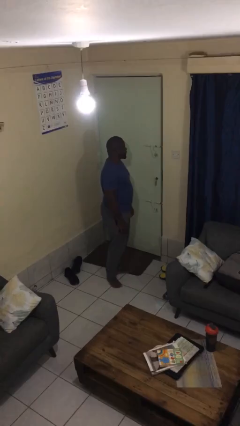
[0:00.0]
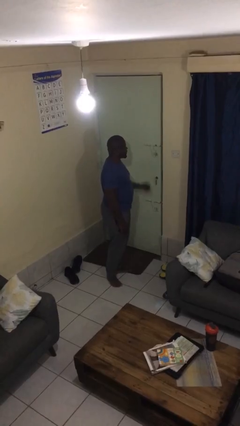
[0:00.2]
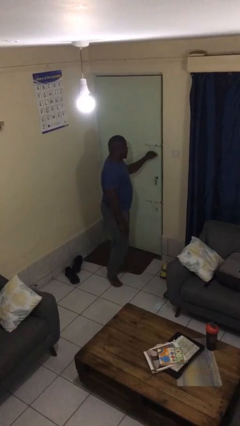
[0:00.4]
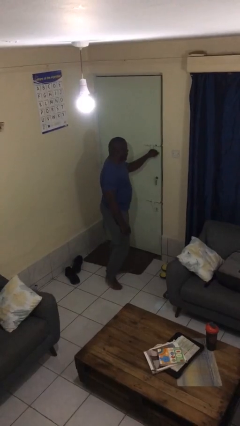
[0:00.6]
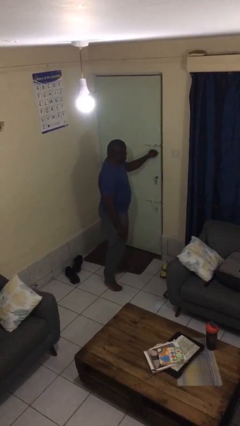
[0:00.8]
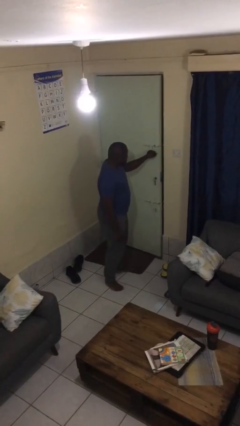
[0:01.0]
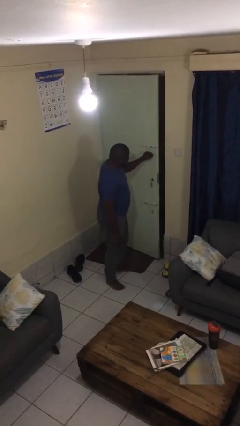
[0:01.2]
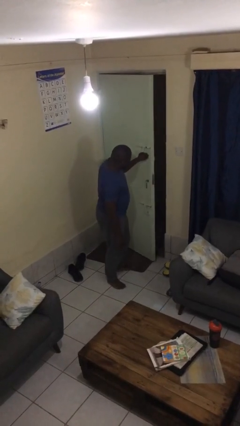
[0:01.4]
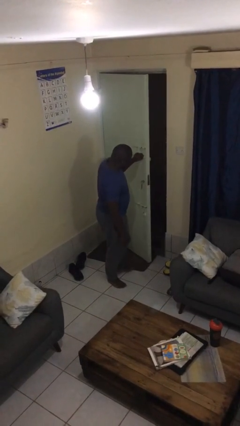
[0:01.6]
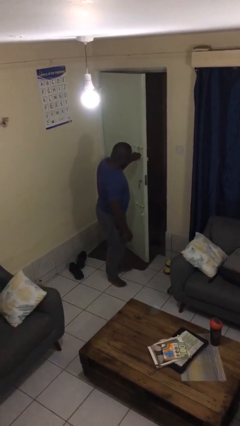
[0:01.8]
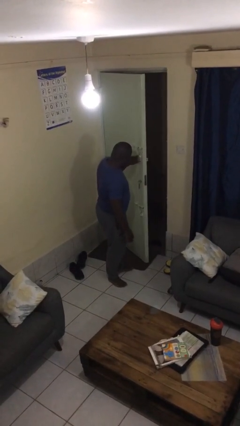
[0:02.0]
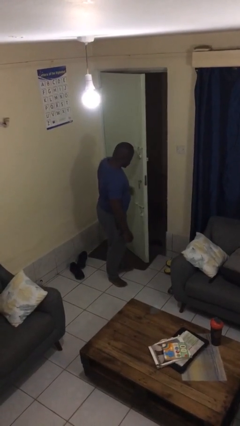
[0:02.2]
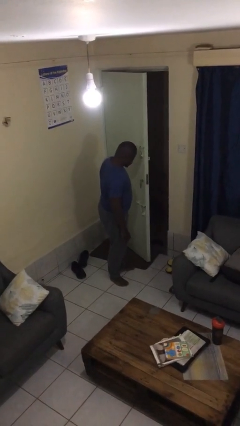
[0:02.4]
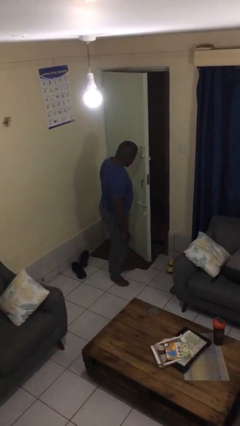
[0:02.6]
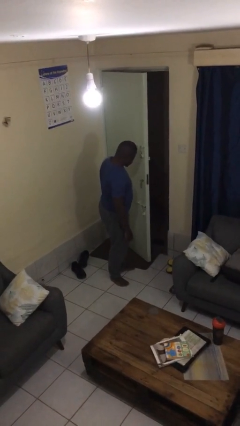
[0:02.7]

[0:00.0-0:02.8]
person opens facility door

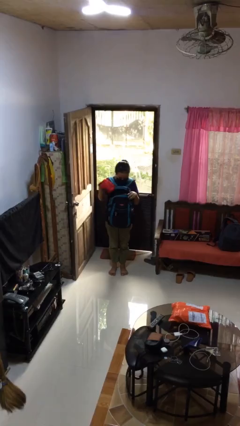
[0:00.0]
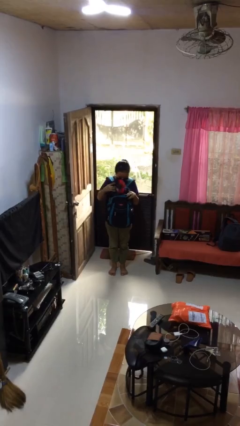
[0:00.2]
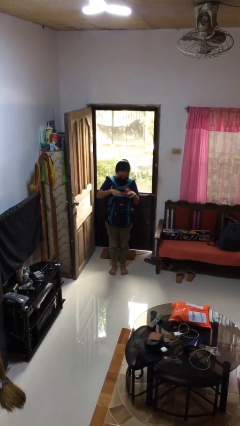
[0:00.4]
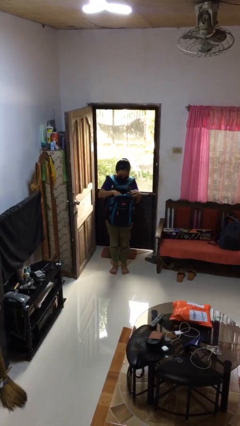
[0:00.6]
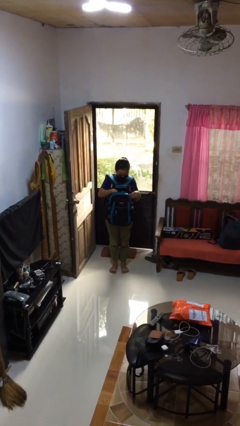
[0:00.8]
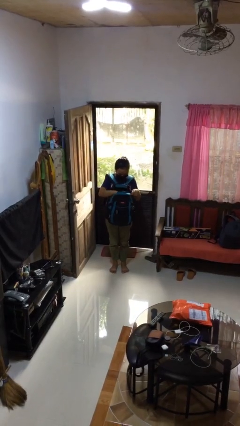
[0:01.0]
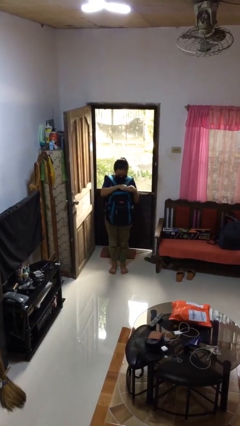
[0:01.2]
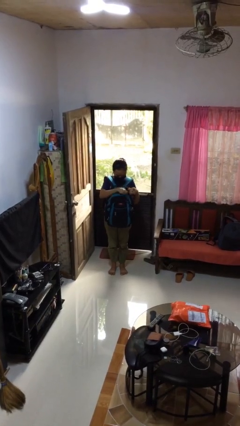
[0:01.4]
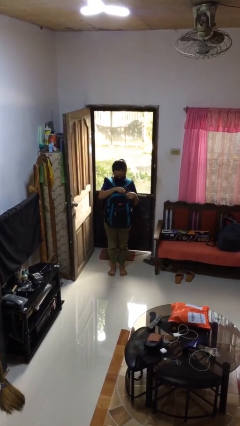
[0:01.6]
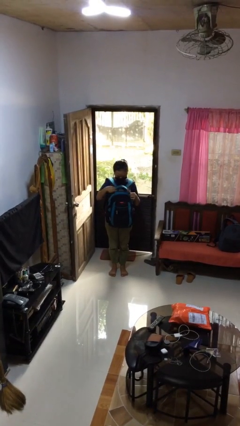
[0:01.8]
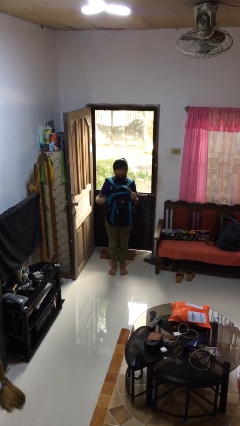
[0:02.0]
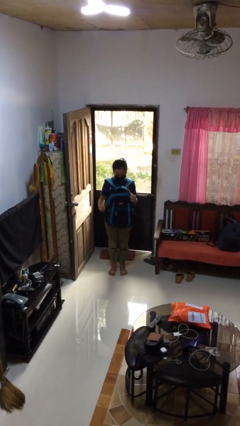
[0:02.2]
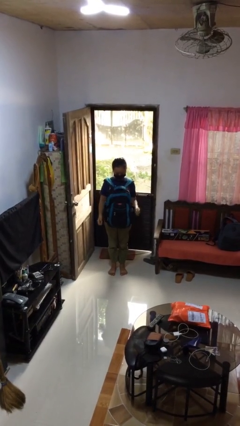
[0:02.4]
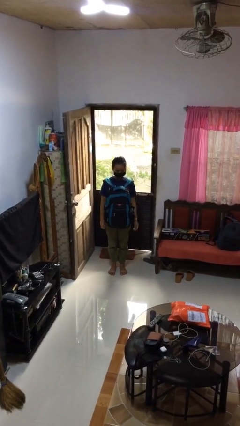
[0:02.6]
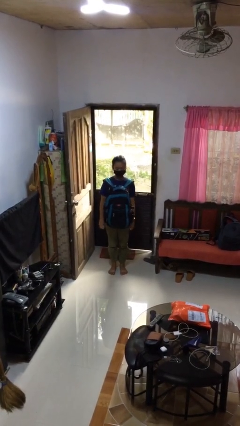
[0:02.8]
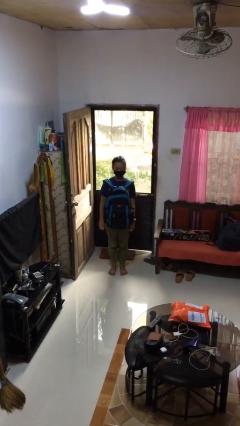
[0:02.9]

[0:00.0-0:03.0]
person puts object into backpack

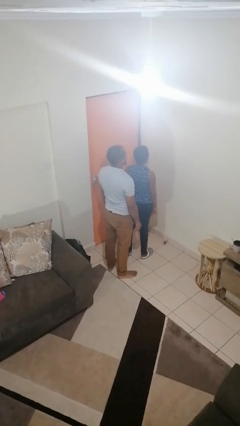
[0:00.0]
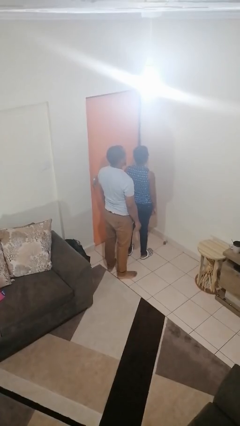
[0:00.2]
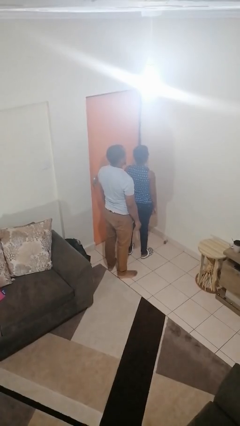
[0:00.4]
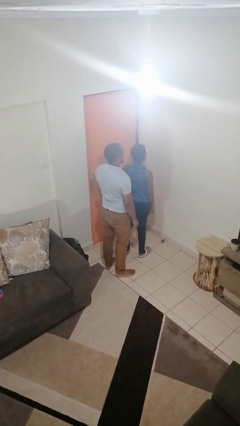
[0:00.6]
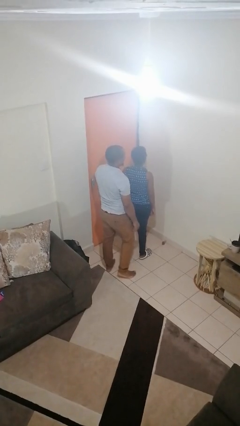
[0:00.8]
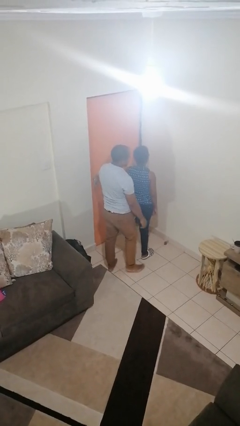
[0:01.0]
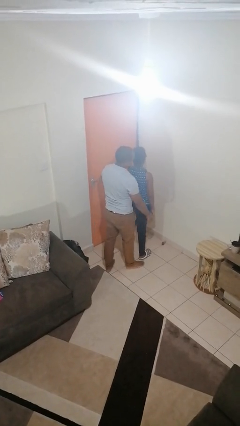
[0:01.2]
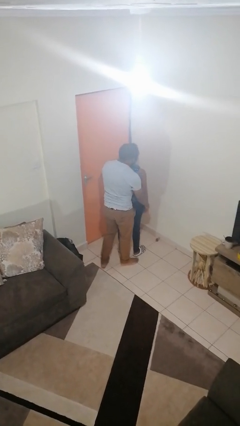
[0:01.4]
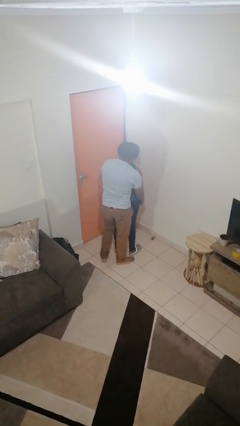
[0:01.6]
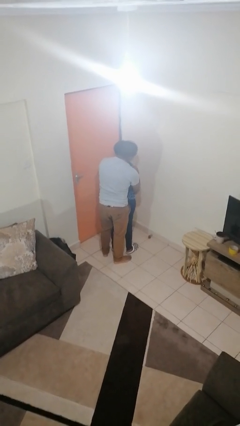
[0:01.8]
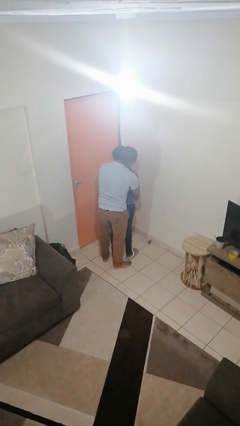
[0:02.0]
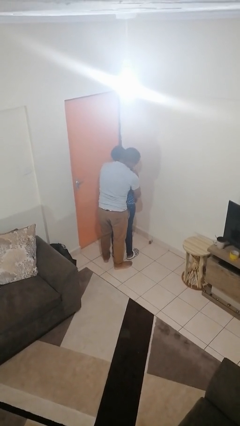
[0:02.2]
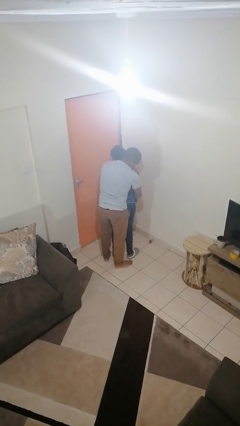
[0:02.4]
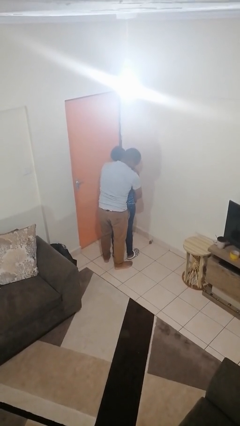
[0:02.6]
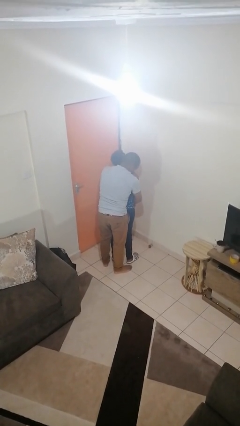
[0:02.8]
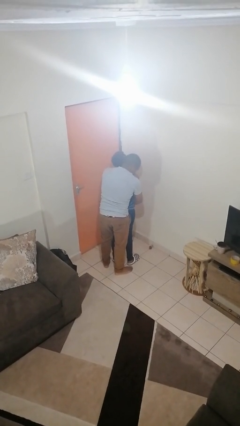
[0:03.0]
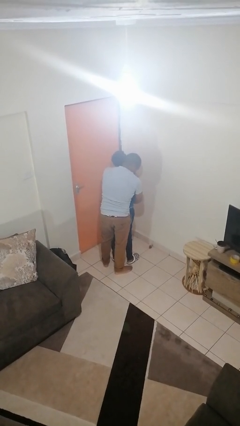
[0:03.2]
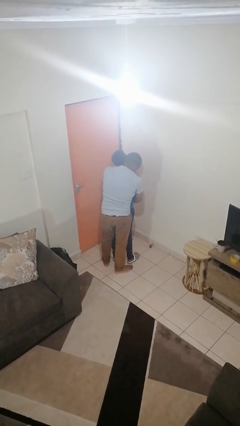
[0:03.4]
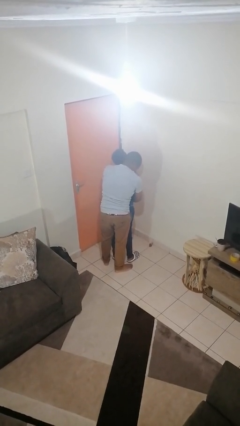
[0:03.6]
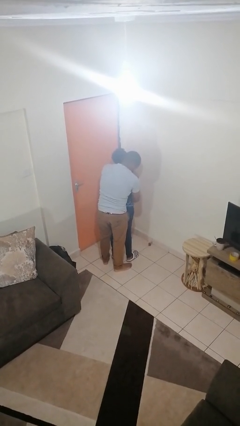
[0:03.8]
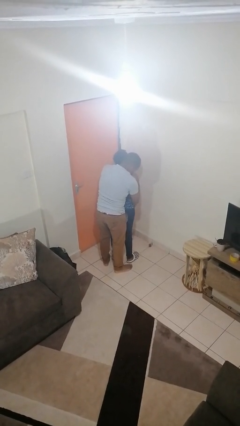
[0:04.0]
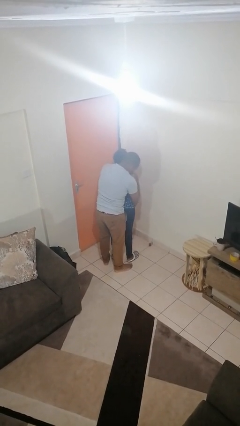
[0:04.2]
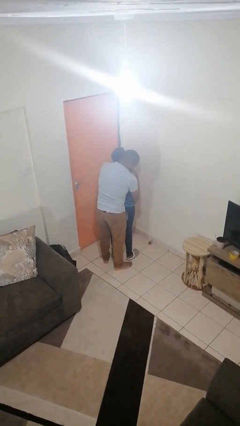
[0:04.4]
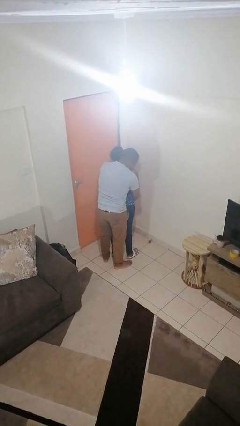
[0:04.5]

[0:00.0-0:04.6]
person hugs person from behind

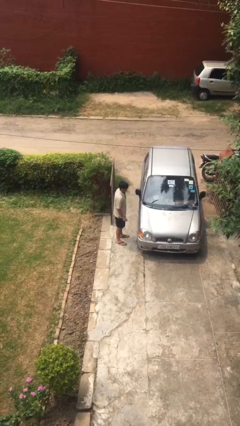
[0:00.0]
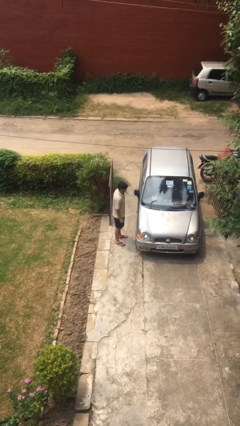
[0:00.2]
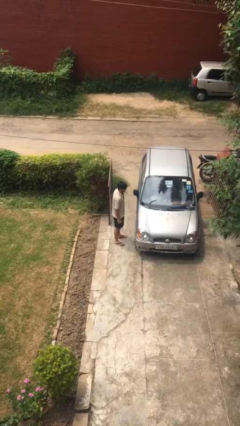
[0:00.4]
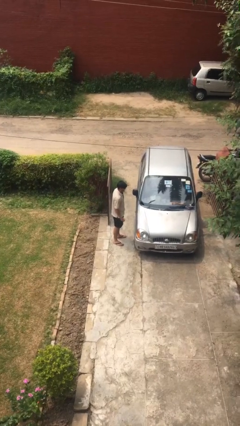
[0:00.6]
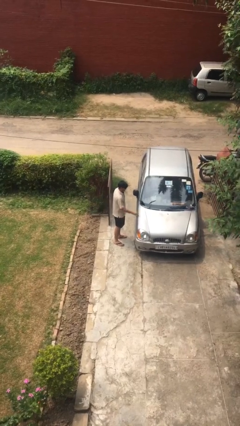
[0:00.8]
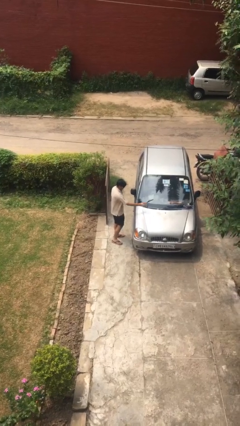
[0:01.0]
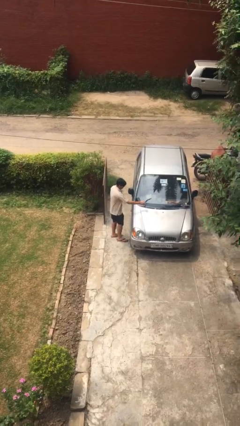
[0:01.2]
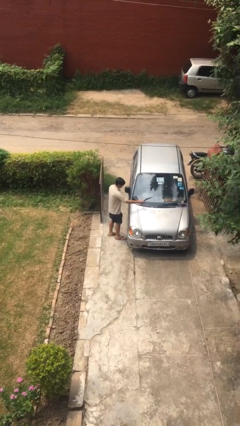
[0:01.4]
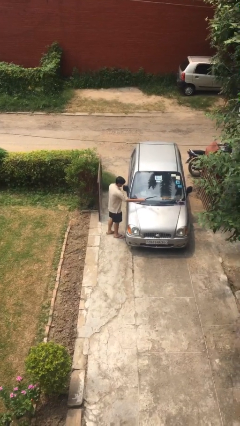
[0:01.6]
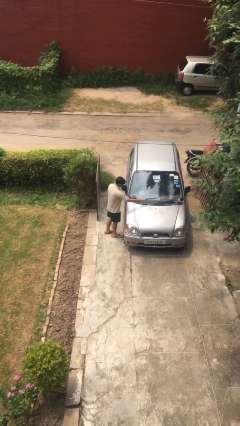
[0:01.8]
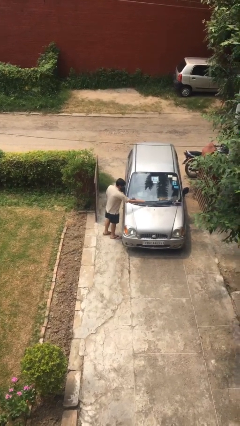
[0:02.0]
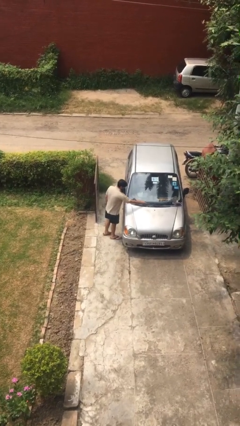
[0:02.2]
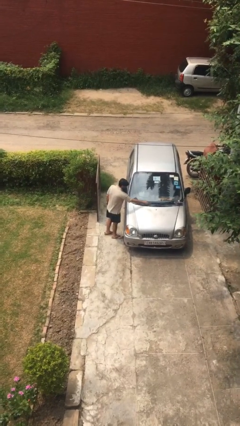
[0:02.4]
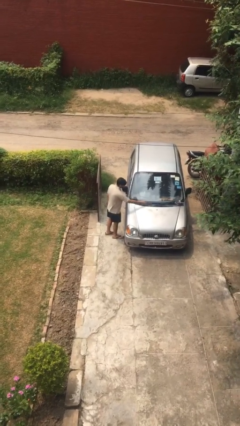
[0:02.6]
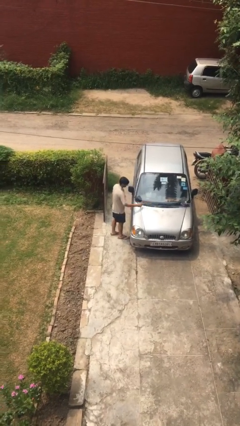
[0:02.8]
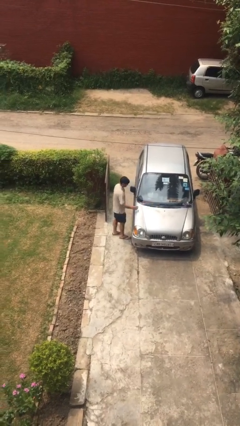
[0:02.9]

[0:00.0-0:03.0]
person flips down car wipers

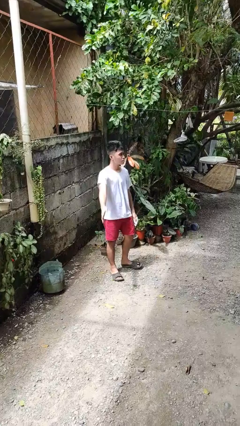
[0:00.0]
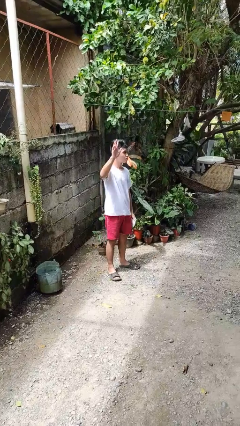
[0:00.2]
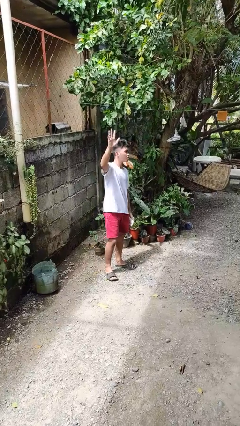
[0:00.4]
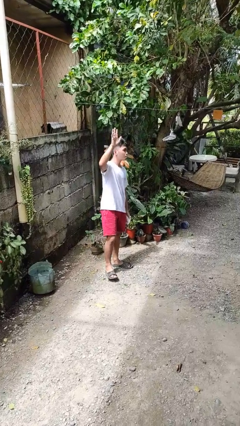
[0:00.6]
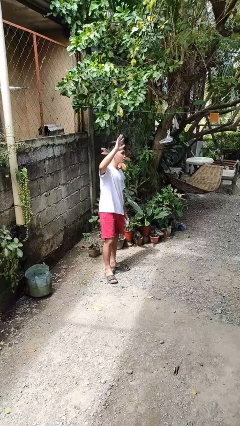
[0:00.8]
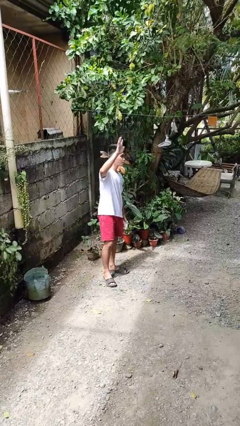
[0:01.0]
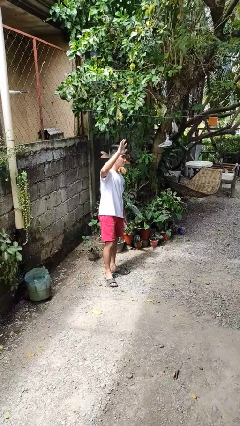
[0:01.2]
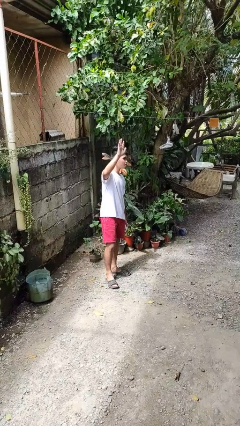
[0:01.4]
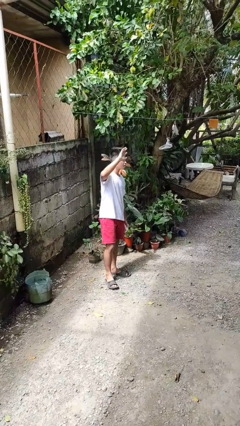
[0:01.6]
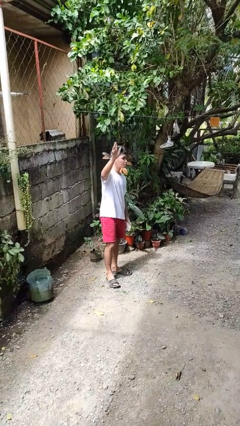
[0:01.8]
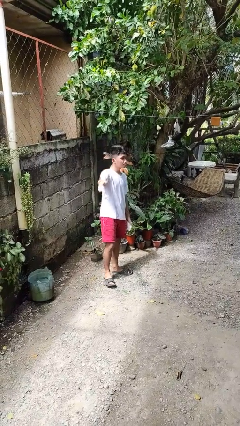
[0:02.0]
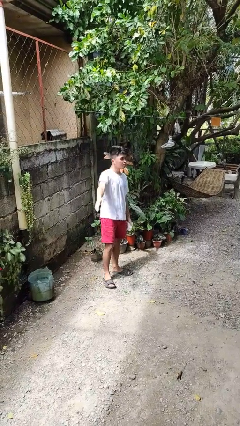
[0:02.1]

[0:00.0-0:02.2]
person waves at person

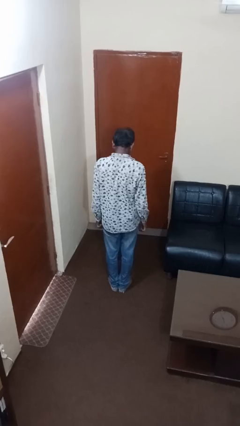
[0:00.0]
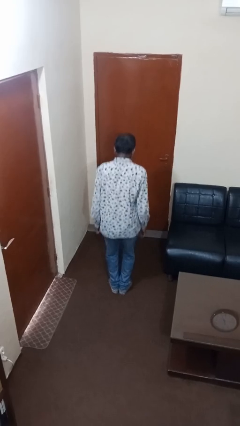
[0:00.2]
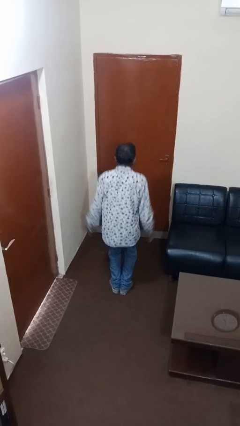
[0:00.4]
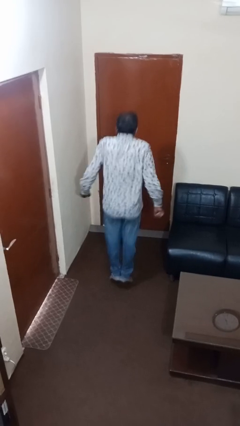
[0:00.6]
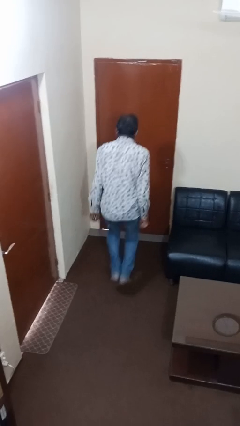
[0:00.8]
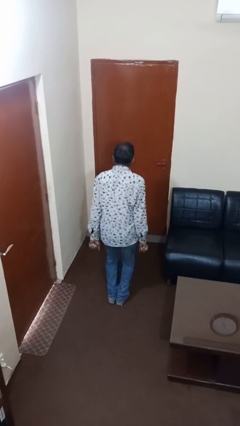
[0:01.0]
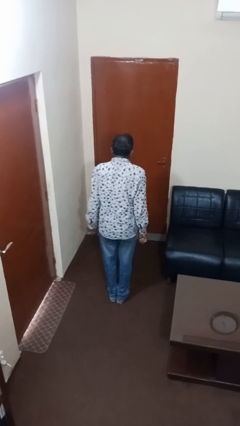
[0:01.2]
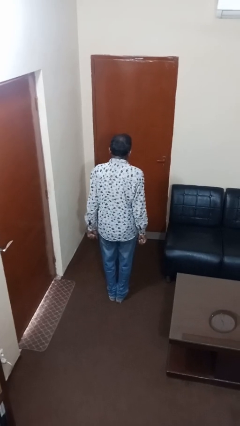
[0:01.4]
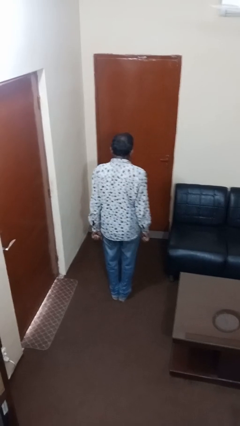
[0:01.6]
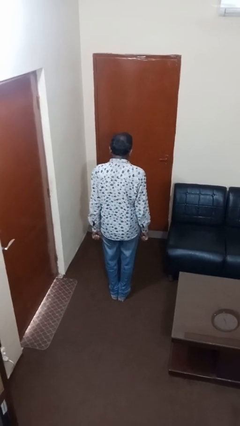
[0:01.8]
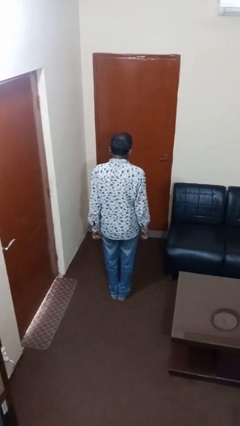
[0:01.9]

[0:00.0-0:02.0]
person jumps
